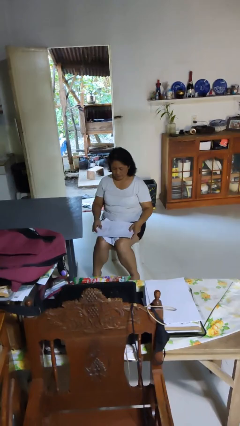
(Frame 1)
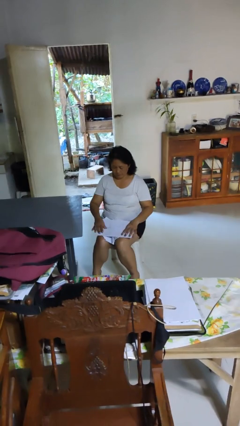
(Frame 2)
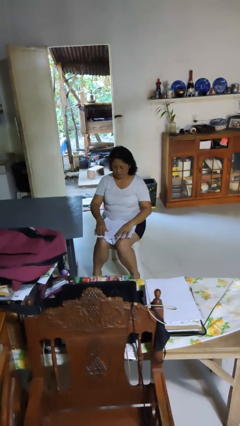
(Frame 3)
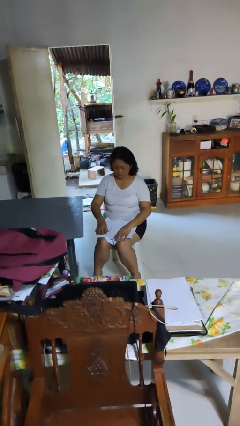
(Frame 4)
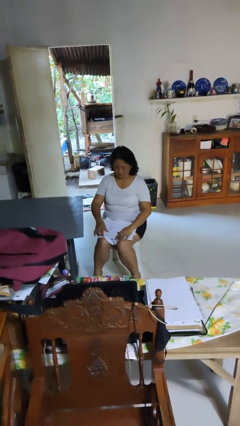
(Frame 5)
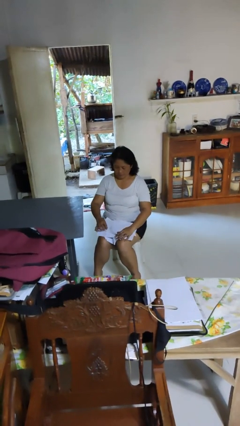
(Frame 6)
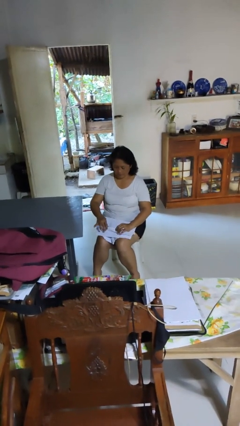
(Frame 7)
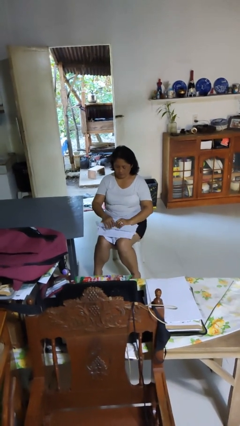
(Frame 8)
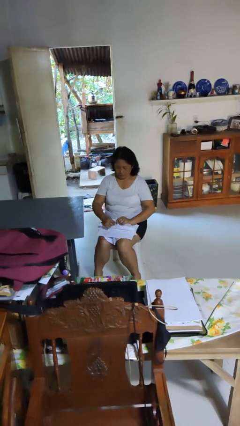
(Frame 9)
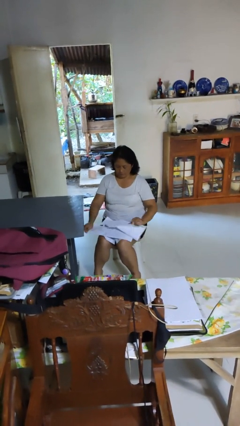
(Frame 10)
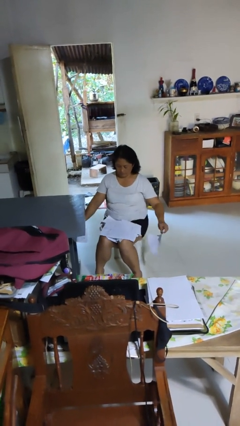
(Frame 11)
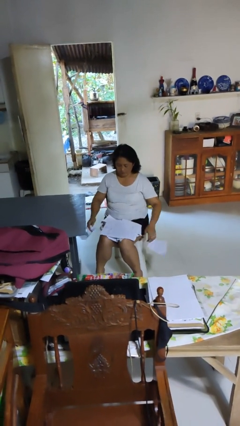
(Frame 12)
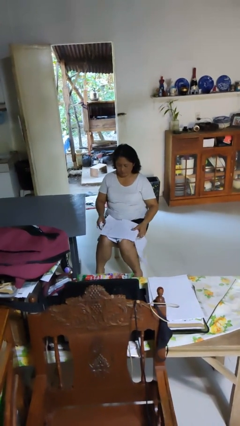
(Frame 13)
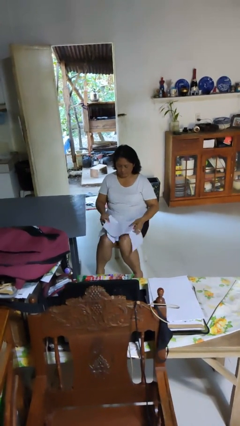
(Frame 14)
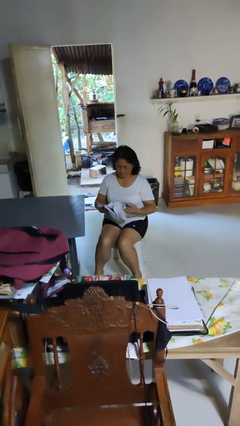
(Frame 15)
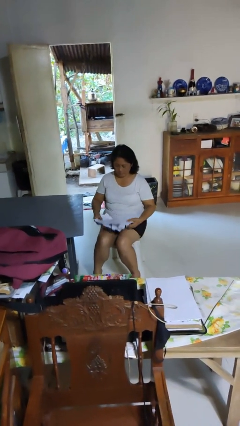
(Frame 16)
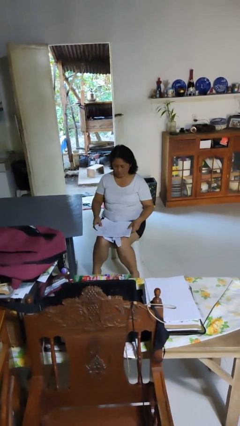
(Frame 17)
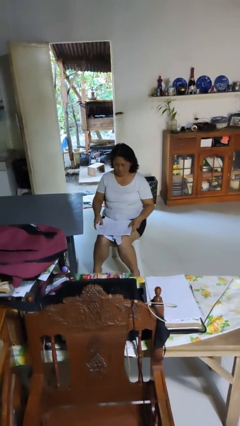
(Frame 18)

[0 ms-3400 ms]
person tears paper

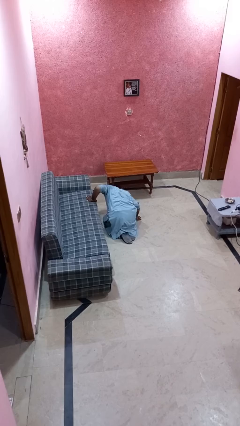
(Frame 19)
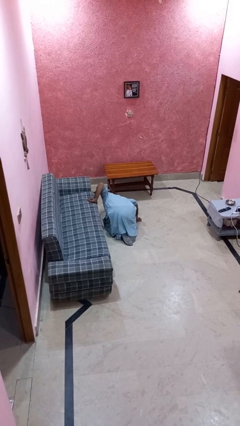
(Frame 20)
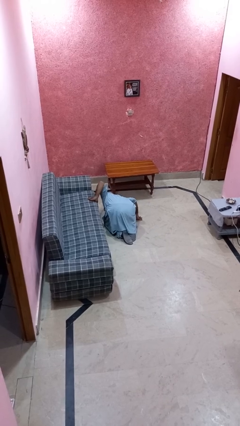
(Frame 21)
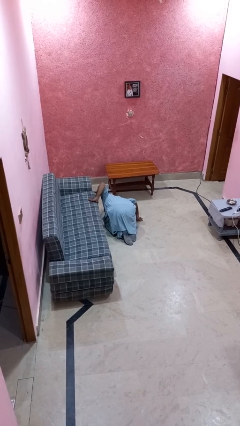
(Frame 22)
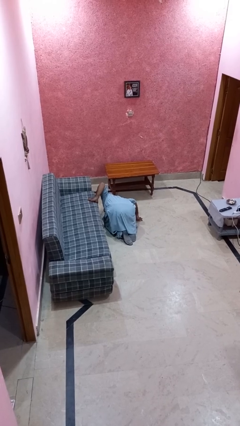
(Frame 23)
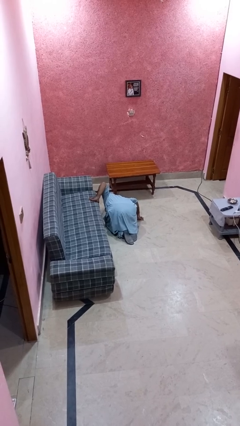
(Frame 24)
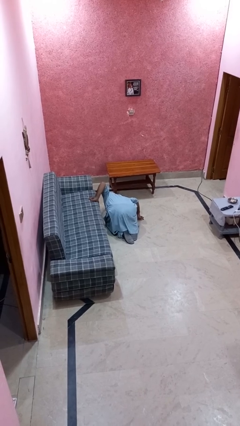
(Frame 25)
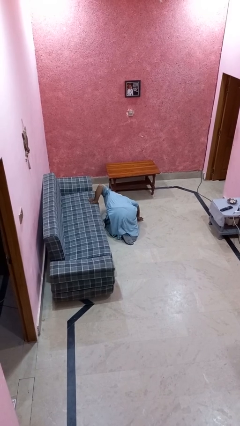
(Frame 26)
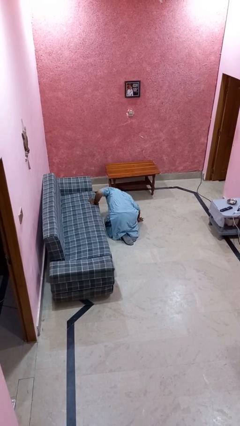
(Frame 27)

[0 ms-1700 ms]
person searches under couch

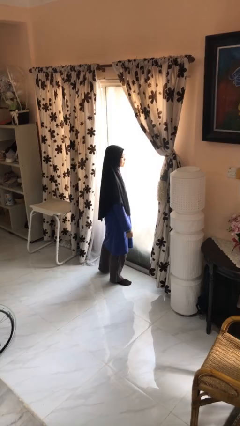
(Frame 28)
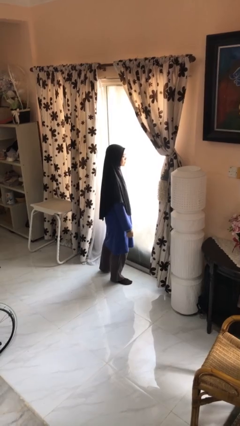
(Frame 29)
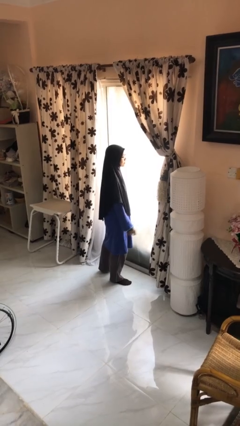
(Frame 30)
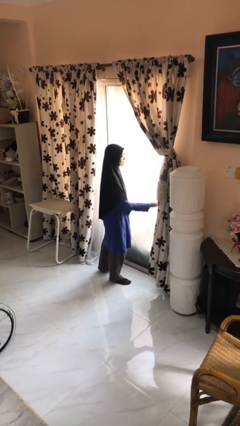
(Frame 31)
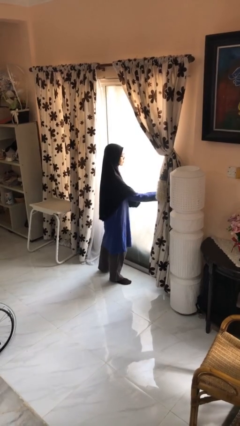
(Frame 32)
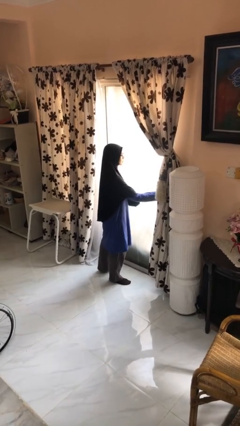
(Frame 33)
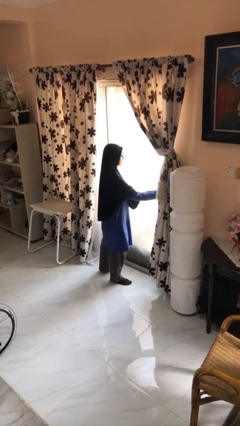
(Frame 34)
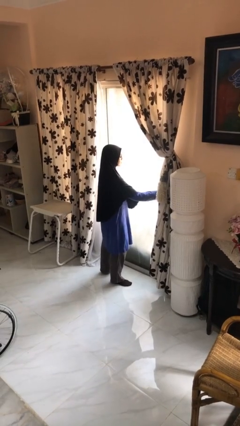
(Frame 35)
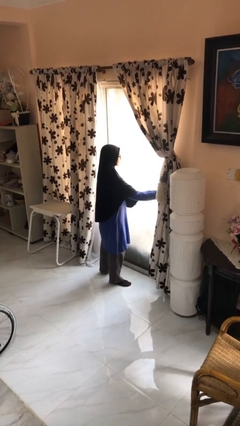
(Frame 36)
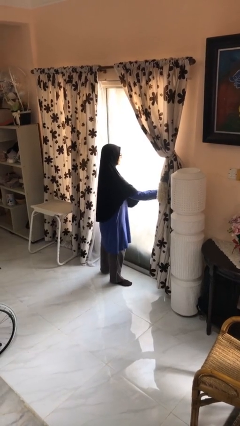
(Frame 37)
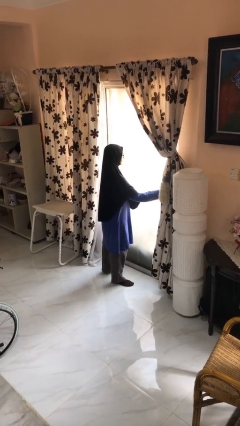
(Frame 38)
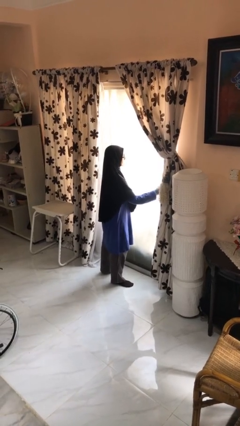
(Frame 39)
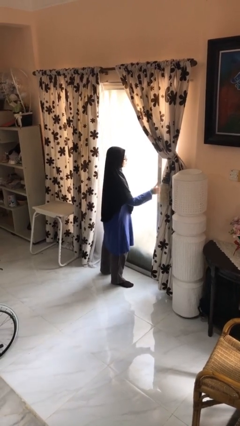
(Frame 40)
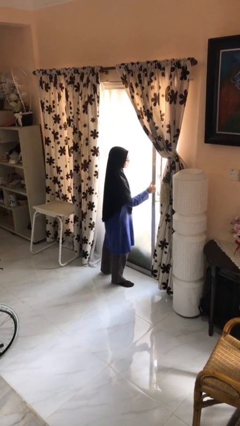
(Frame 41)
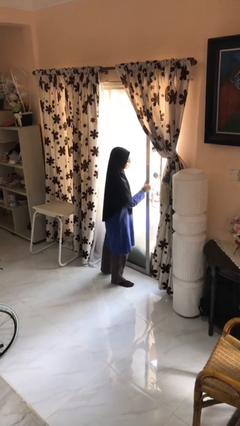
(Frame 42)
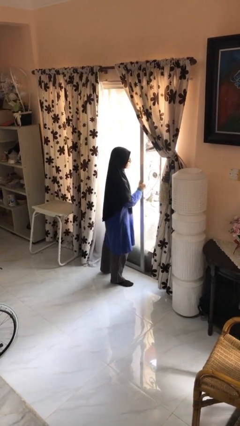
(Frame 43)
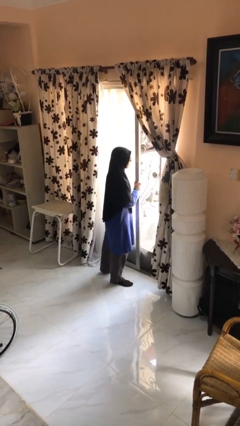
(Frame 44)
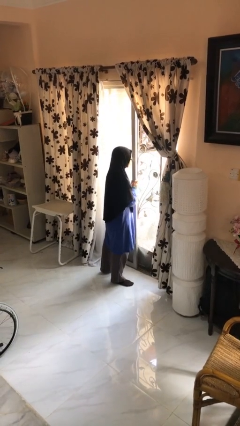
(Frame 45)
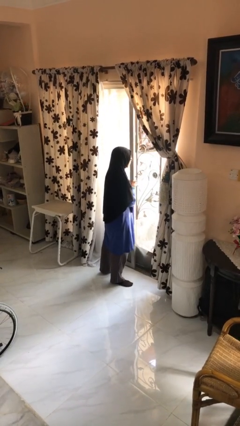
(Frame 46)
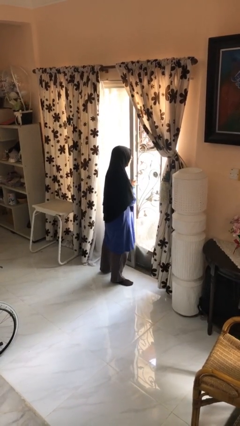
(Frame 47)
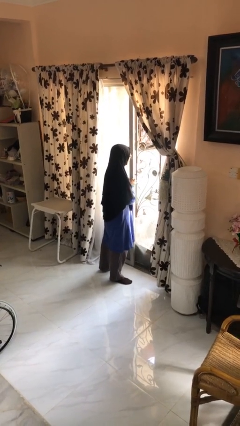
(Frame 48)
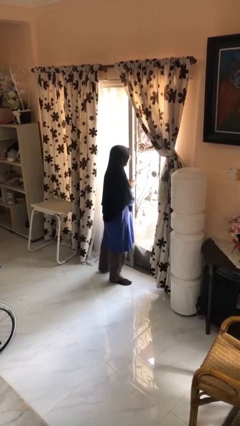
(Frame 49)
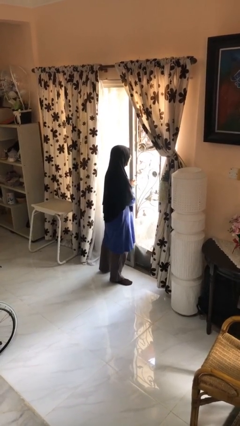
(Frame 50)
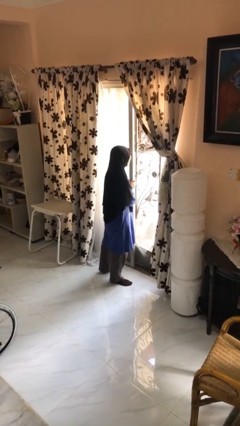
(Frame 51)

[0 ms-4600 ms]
person opens sliding door

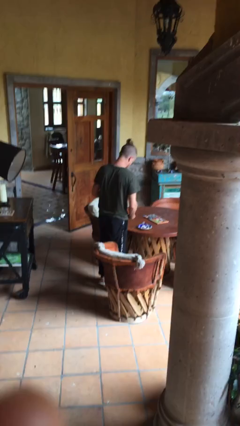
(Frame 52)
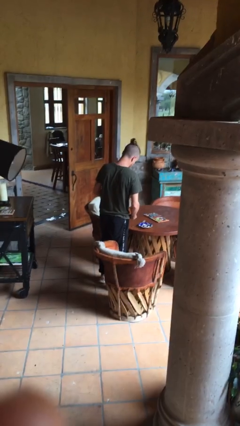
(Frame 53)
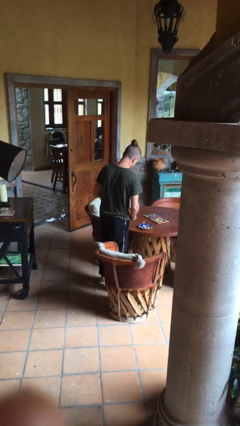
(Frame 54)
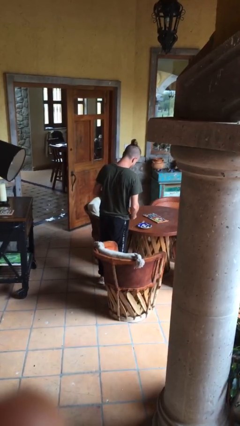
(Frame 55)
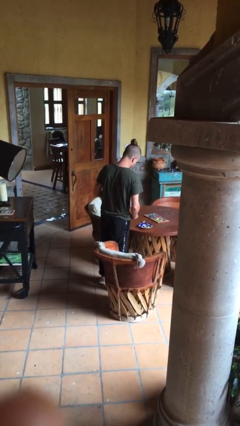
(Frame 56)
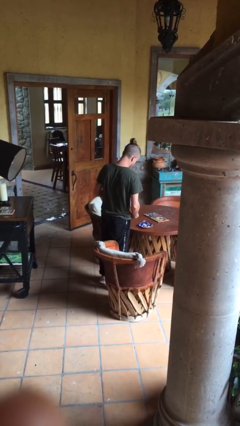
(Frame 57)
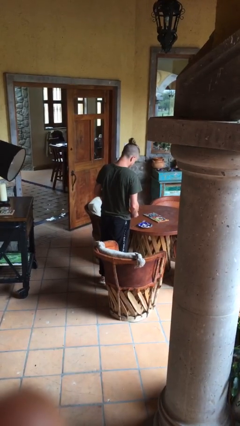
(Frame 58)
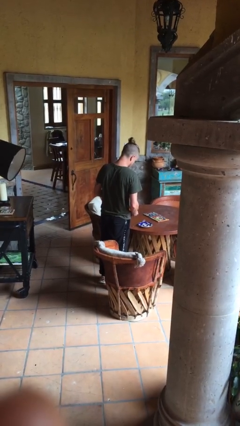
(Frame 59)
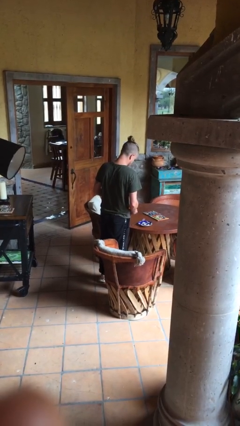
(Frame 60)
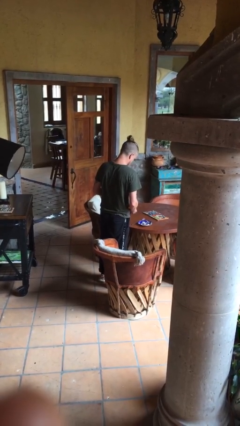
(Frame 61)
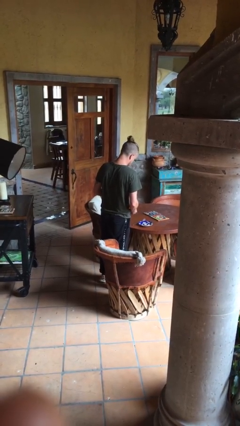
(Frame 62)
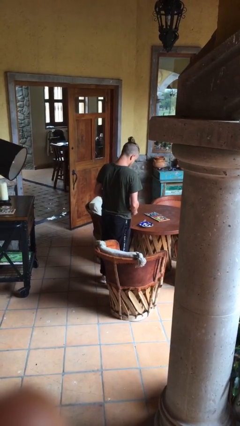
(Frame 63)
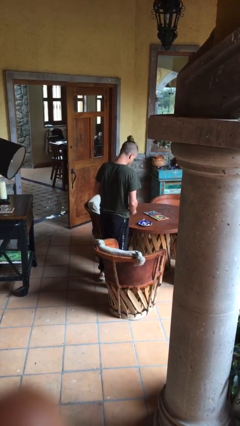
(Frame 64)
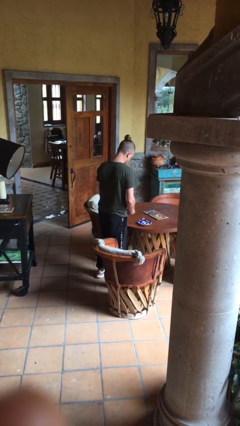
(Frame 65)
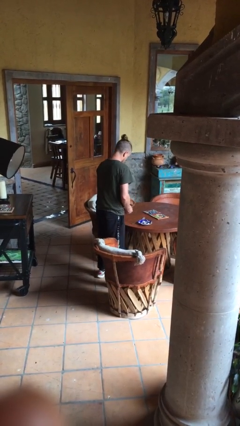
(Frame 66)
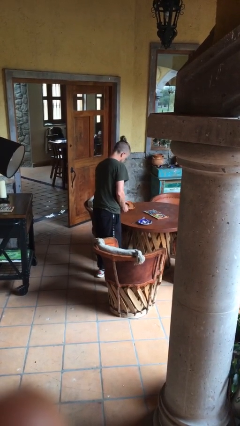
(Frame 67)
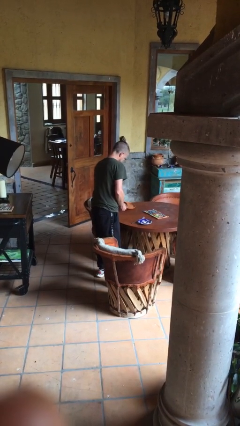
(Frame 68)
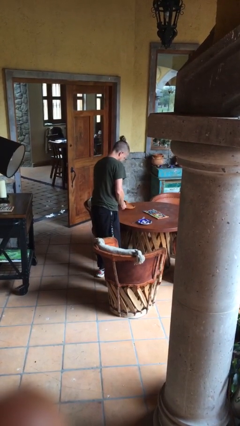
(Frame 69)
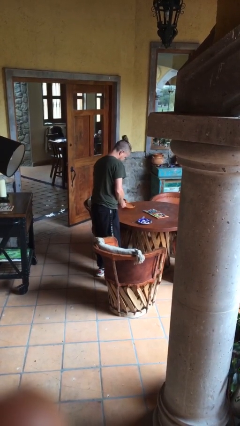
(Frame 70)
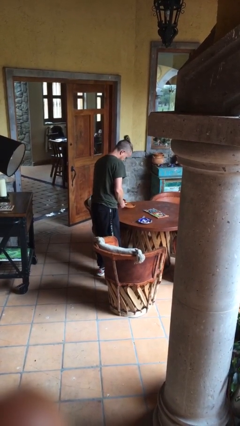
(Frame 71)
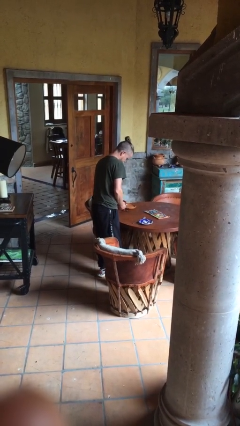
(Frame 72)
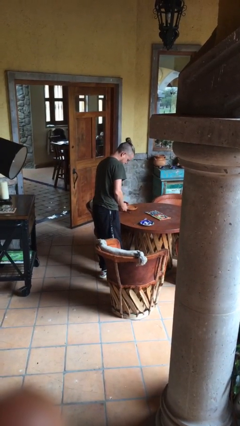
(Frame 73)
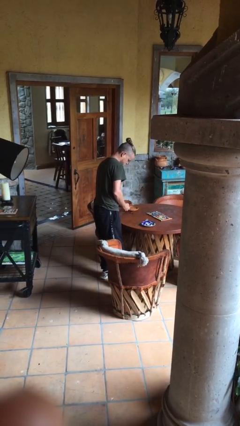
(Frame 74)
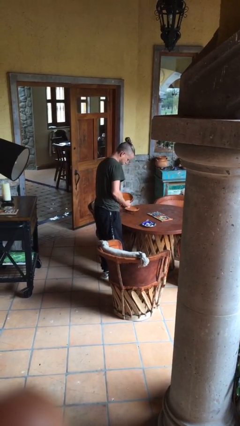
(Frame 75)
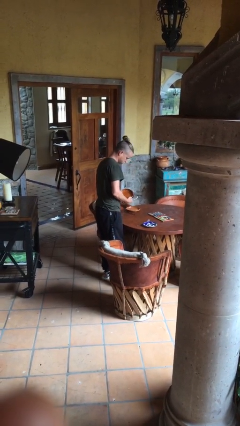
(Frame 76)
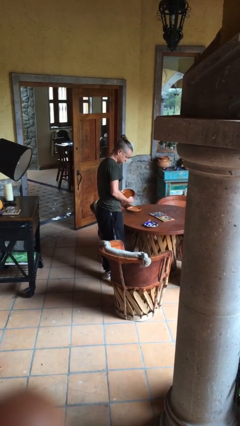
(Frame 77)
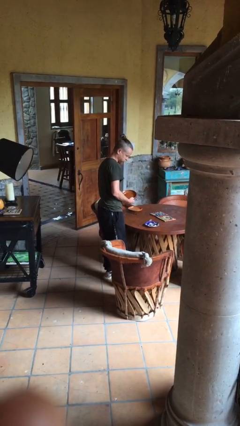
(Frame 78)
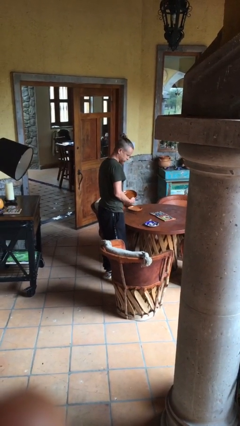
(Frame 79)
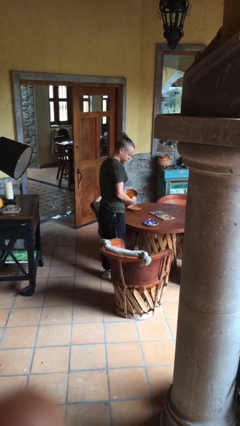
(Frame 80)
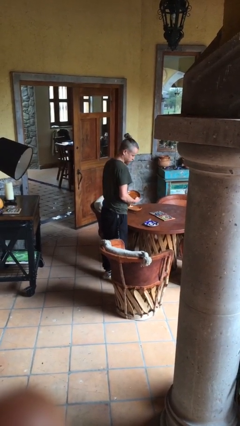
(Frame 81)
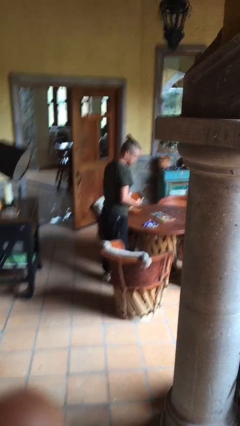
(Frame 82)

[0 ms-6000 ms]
person sets table

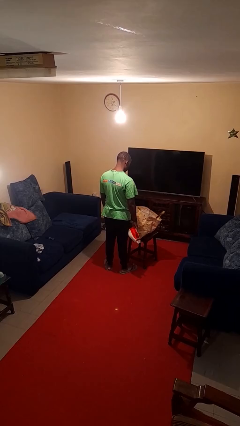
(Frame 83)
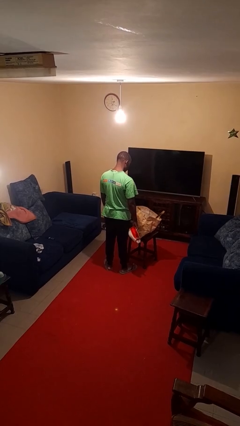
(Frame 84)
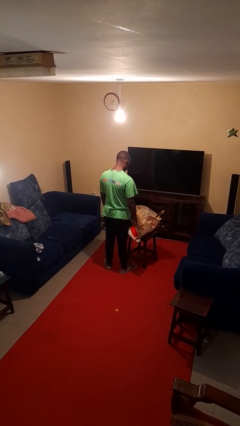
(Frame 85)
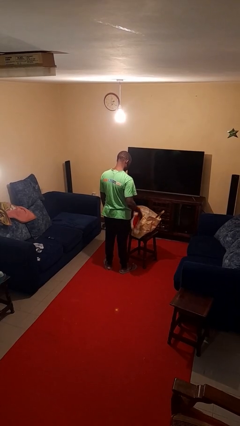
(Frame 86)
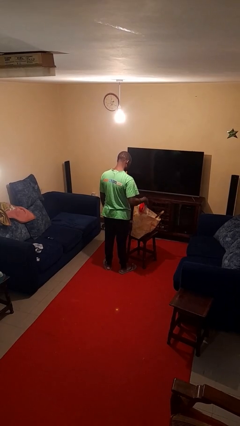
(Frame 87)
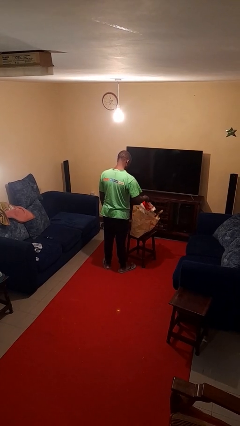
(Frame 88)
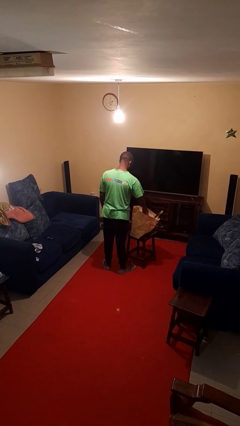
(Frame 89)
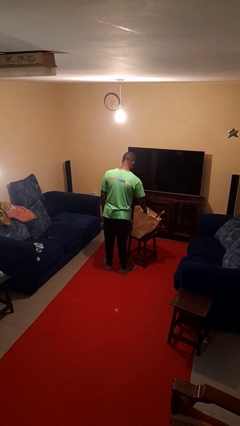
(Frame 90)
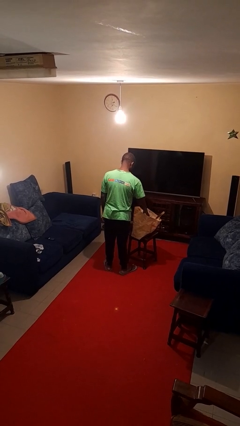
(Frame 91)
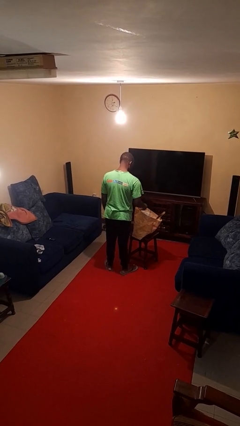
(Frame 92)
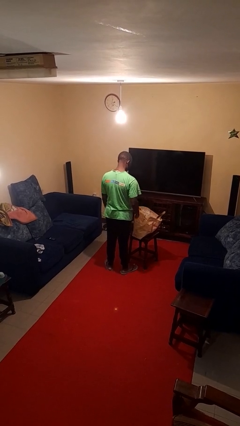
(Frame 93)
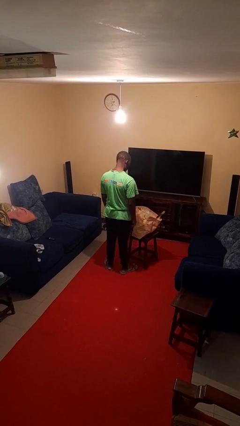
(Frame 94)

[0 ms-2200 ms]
person puts object into bag
